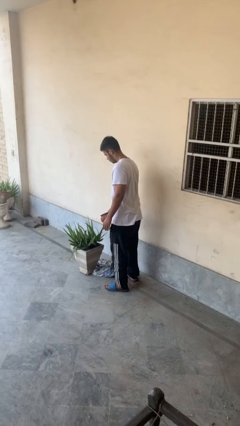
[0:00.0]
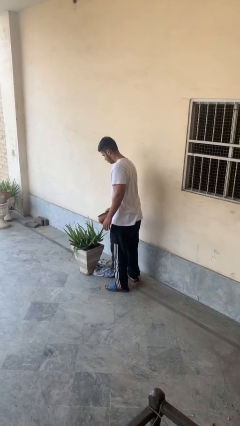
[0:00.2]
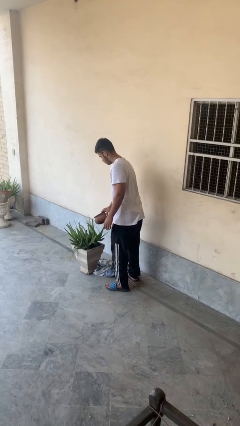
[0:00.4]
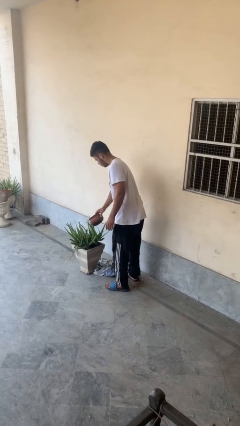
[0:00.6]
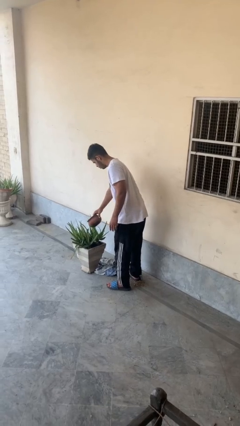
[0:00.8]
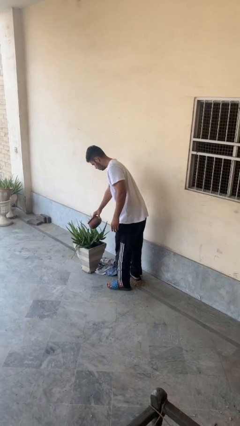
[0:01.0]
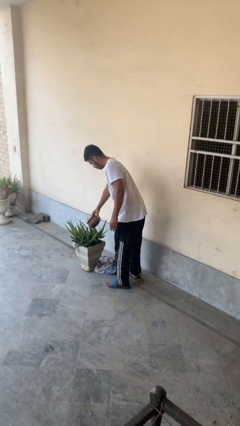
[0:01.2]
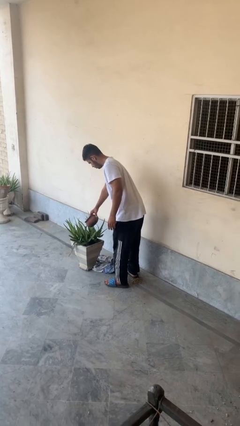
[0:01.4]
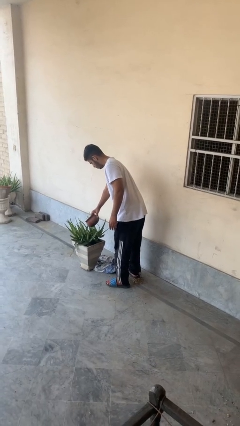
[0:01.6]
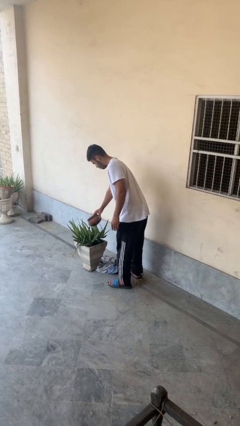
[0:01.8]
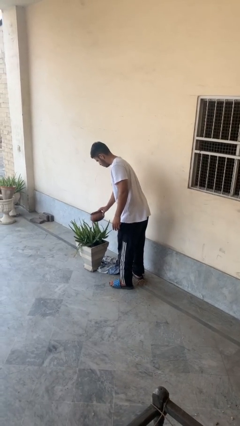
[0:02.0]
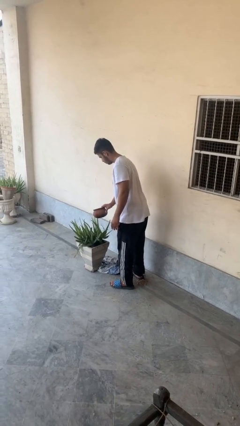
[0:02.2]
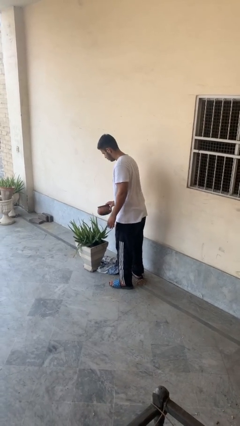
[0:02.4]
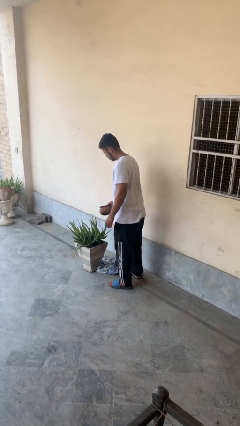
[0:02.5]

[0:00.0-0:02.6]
person waters houseplant

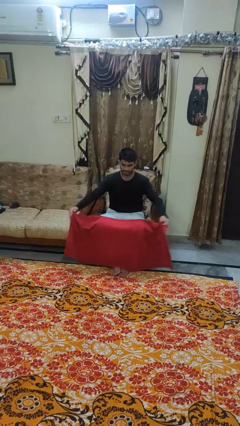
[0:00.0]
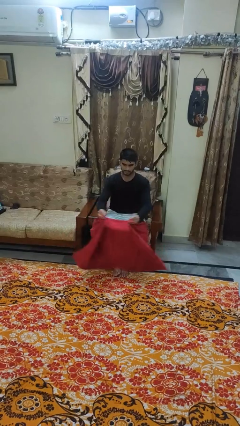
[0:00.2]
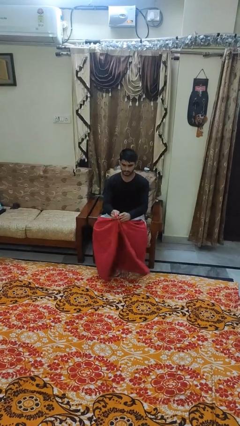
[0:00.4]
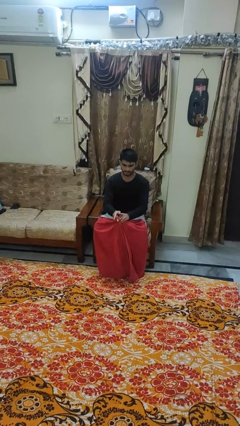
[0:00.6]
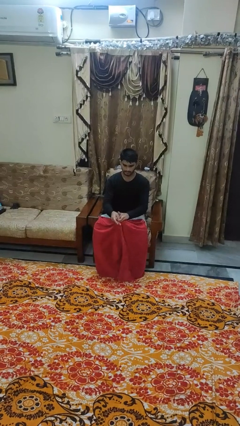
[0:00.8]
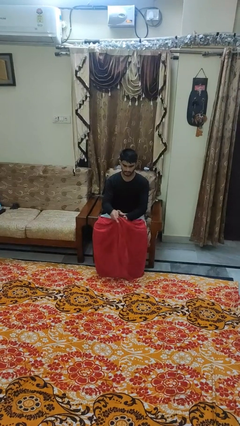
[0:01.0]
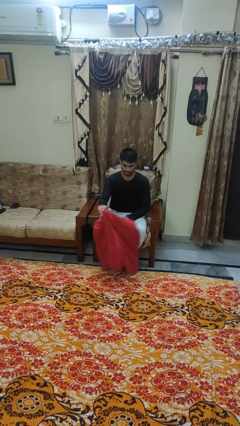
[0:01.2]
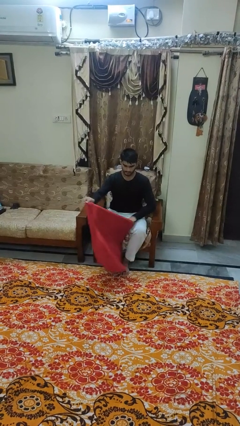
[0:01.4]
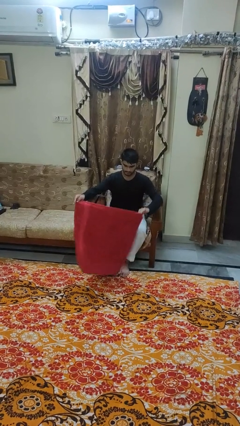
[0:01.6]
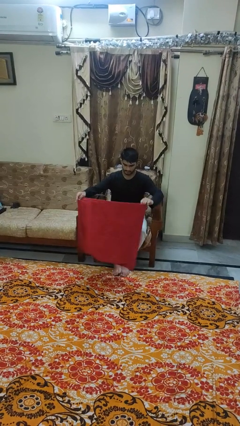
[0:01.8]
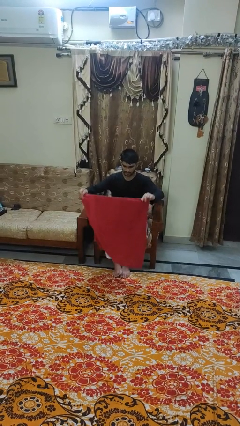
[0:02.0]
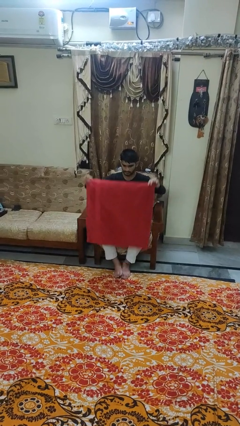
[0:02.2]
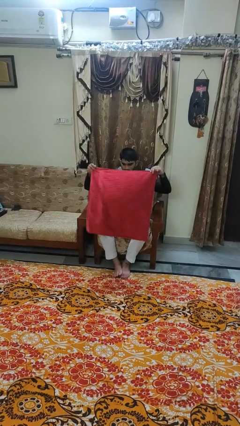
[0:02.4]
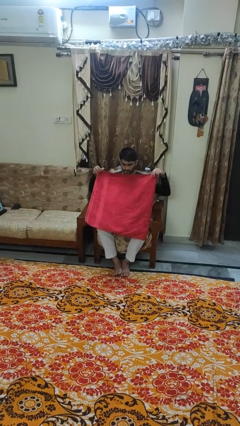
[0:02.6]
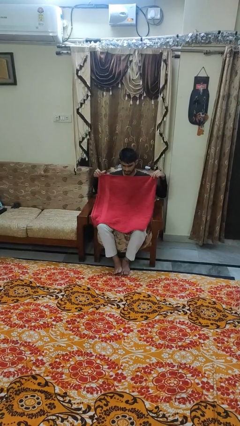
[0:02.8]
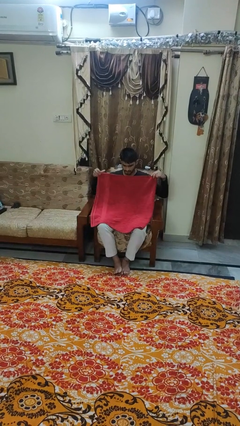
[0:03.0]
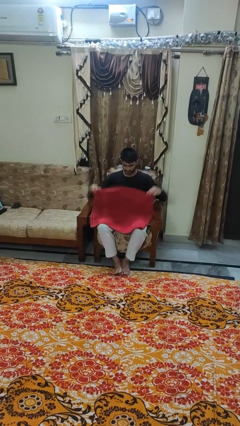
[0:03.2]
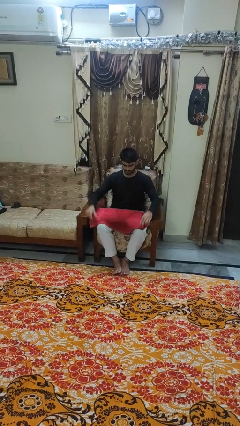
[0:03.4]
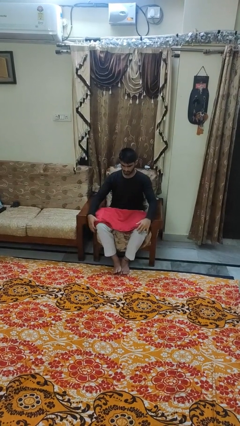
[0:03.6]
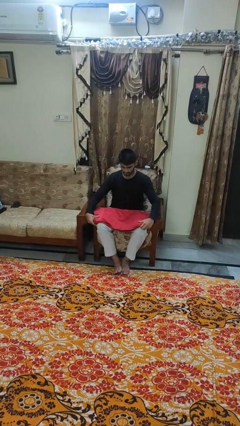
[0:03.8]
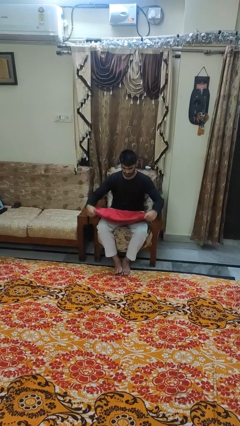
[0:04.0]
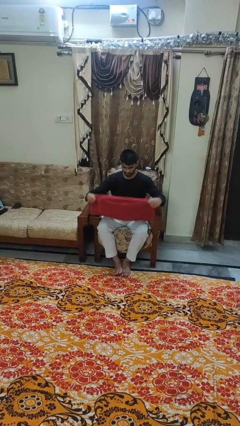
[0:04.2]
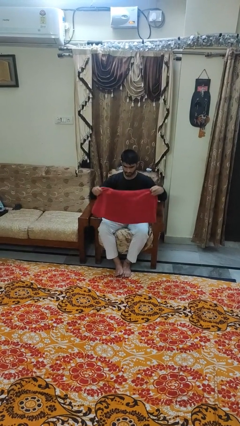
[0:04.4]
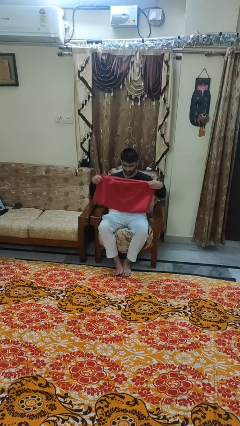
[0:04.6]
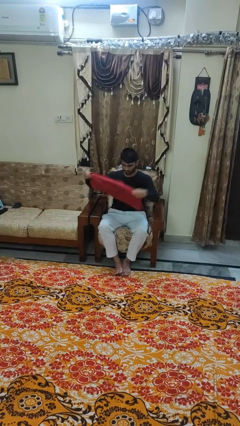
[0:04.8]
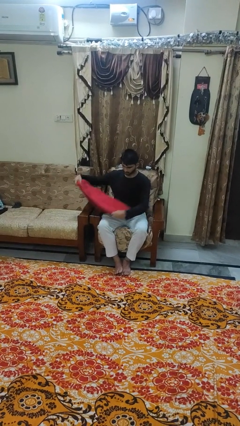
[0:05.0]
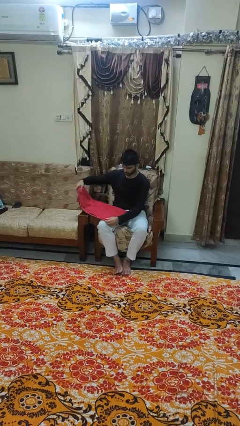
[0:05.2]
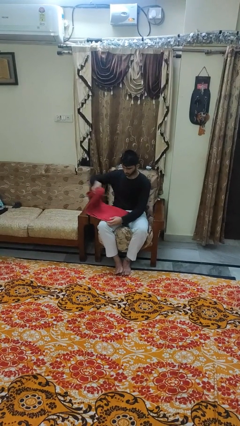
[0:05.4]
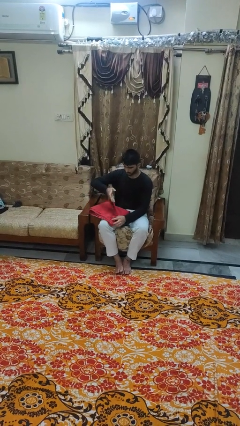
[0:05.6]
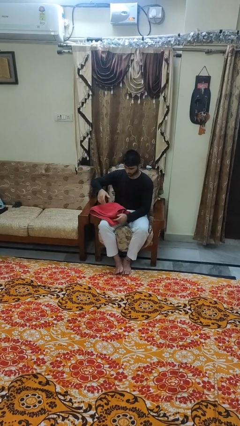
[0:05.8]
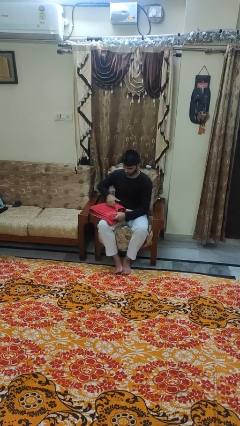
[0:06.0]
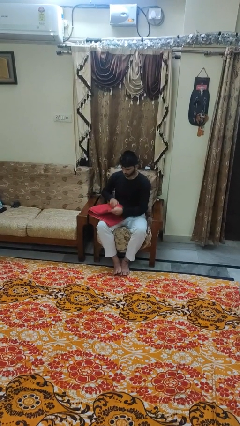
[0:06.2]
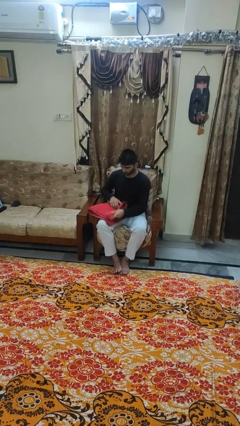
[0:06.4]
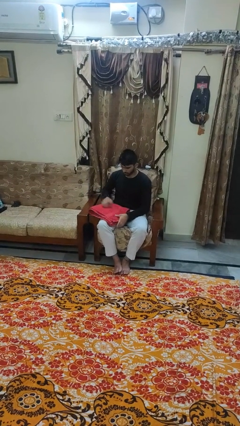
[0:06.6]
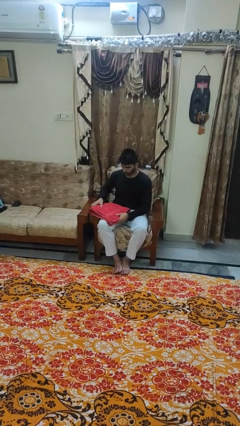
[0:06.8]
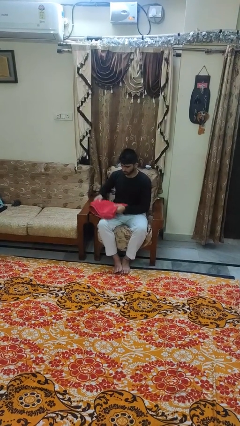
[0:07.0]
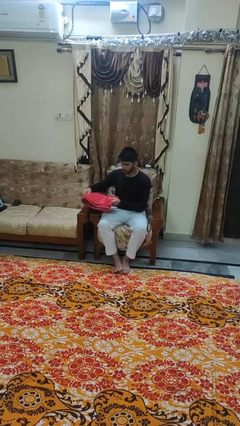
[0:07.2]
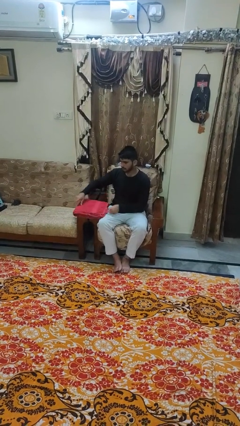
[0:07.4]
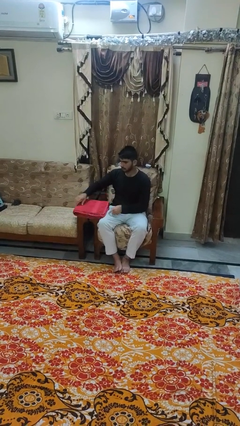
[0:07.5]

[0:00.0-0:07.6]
person folds towel

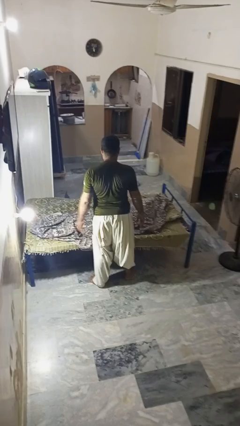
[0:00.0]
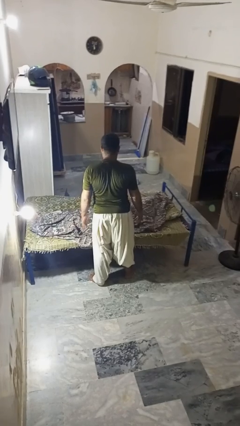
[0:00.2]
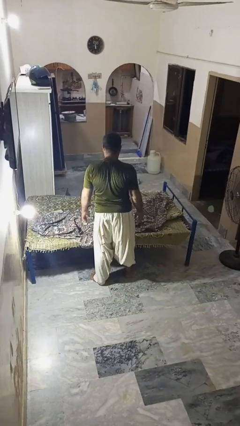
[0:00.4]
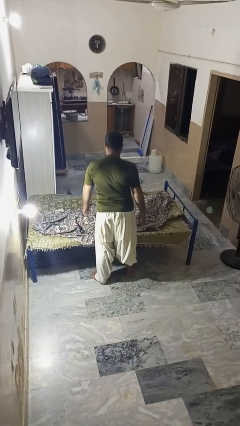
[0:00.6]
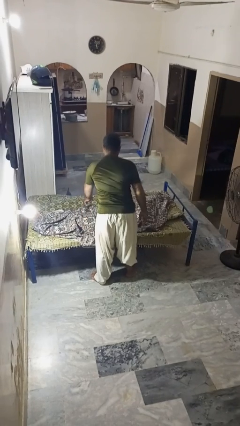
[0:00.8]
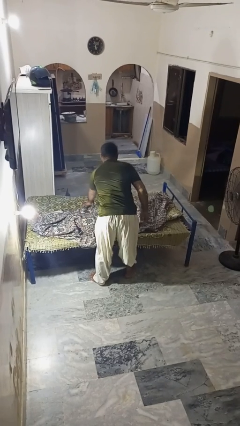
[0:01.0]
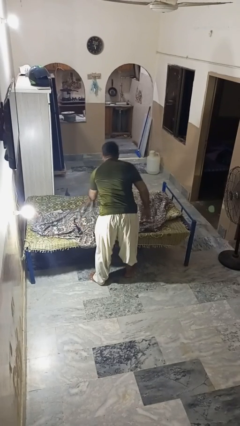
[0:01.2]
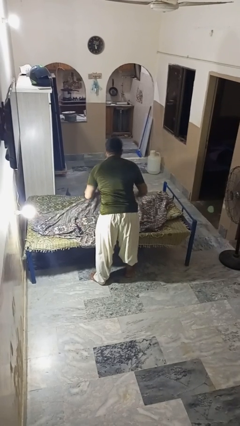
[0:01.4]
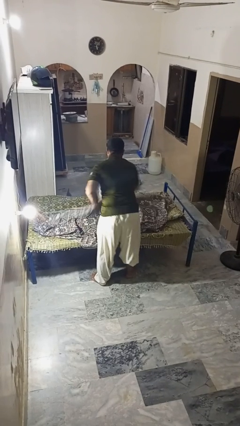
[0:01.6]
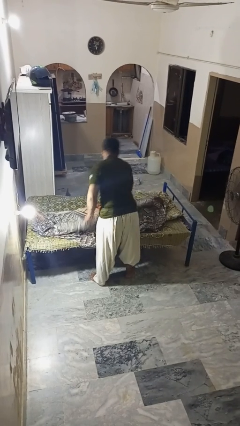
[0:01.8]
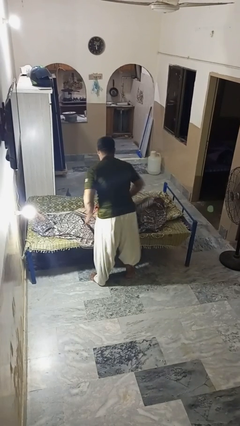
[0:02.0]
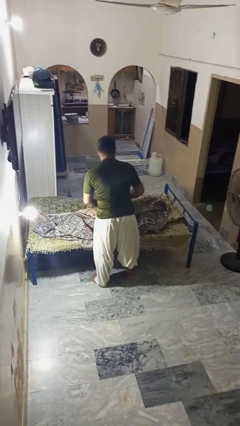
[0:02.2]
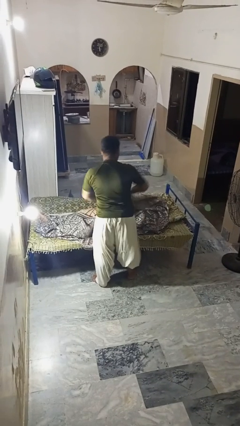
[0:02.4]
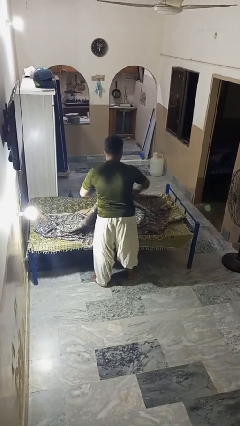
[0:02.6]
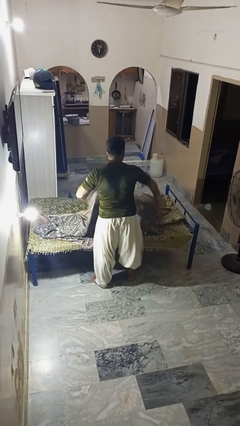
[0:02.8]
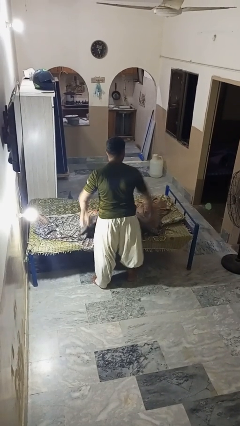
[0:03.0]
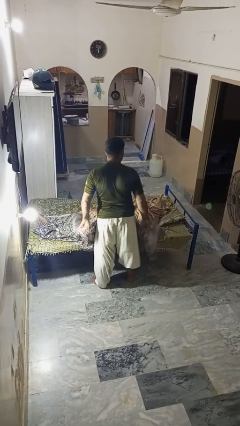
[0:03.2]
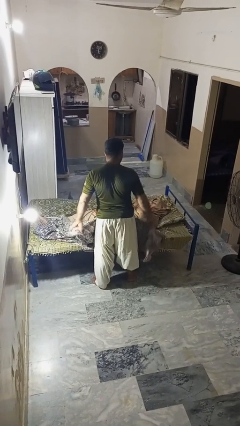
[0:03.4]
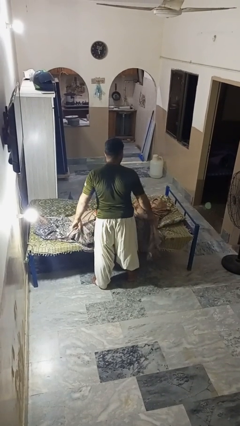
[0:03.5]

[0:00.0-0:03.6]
person uncovers friend with blanket

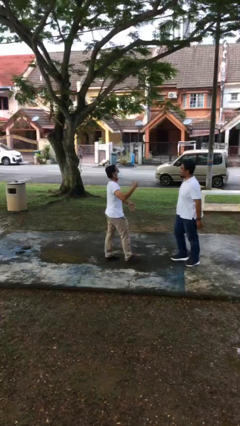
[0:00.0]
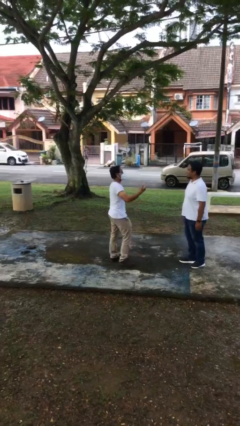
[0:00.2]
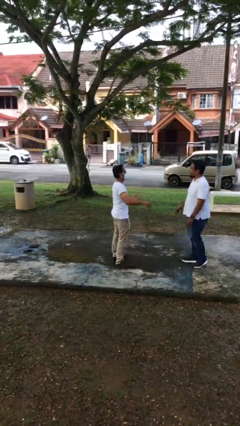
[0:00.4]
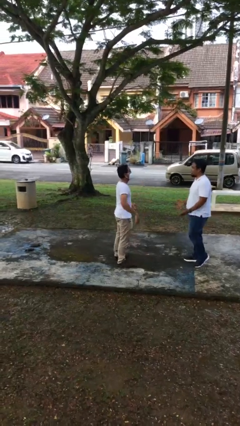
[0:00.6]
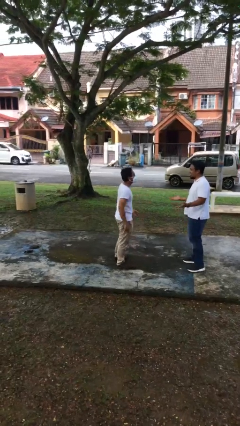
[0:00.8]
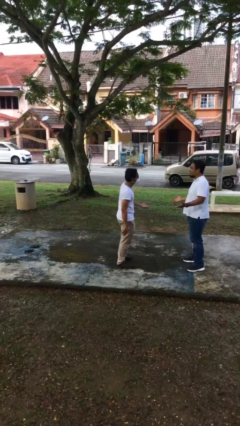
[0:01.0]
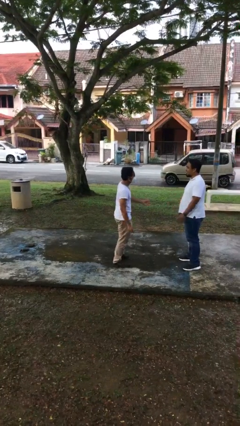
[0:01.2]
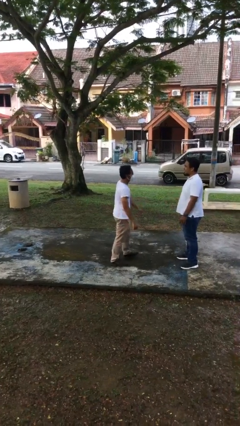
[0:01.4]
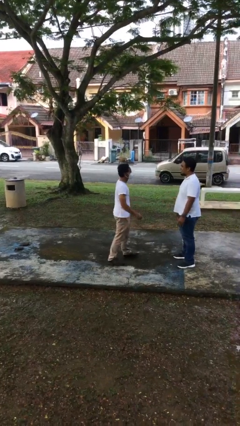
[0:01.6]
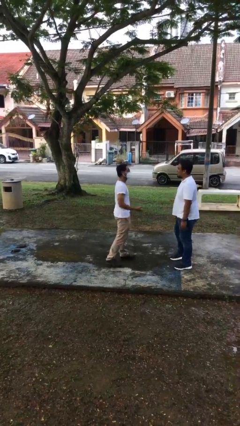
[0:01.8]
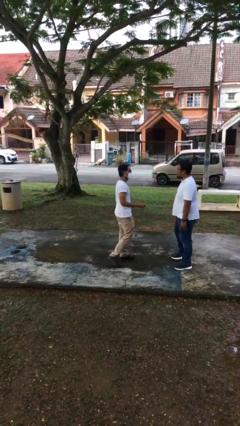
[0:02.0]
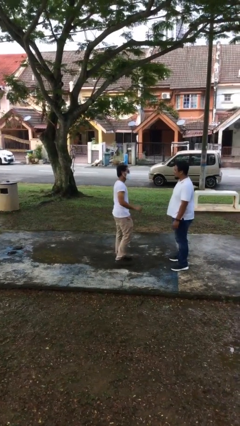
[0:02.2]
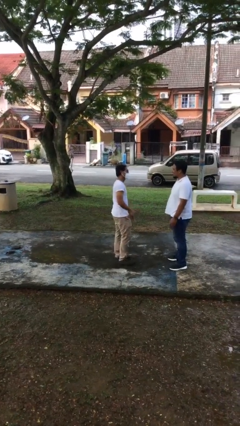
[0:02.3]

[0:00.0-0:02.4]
person talks to person

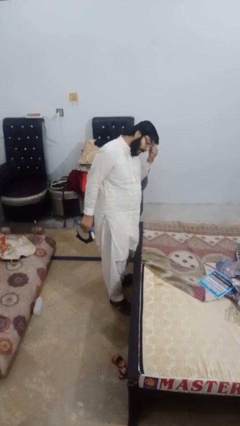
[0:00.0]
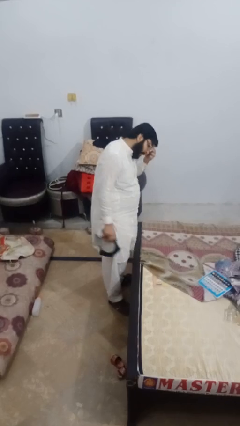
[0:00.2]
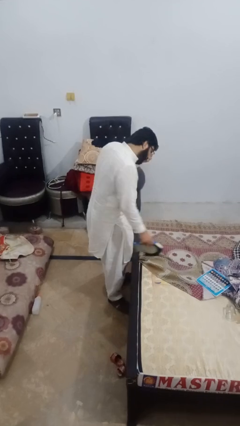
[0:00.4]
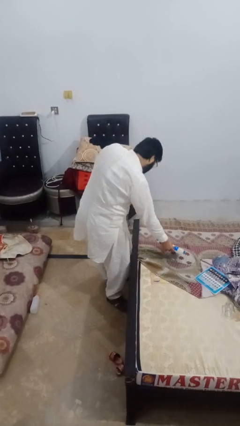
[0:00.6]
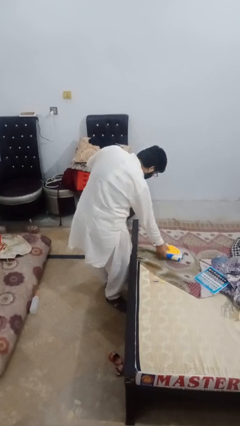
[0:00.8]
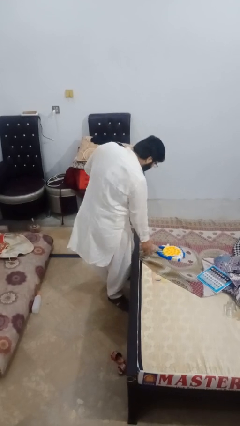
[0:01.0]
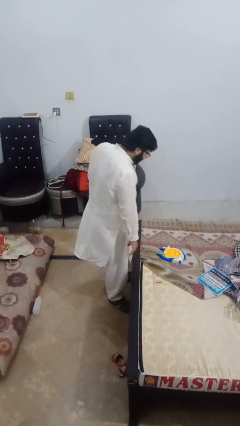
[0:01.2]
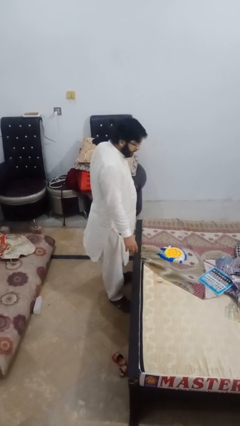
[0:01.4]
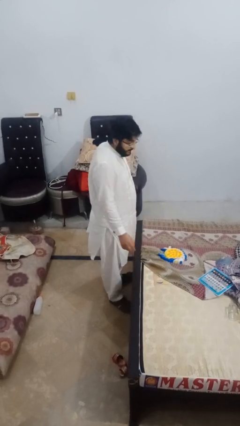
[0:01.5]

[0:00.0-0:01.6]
person puts down object on bed
